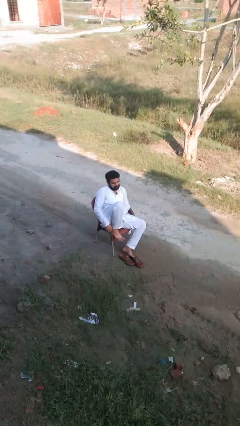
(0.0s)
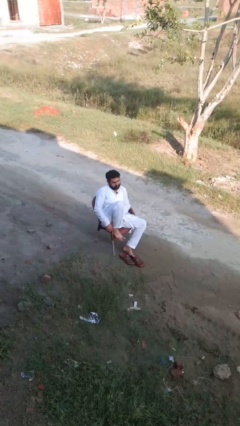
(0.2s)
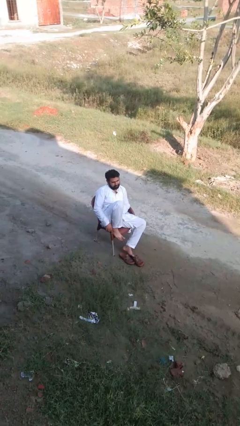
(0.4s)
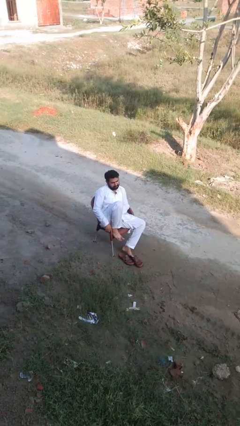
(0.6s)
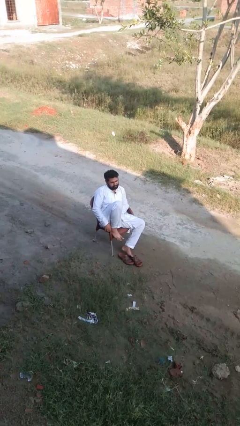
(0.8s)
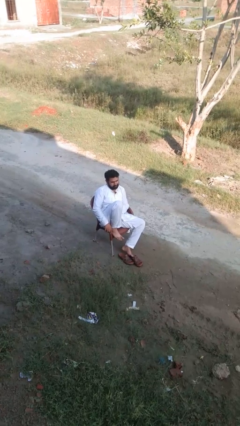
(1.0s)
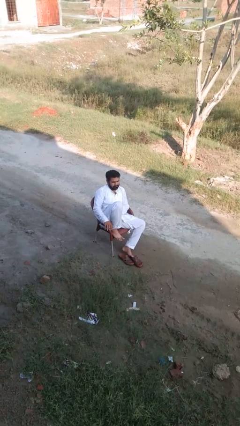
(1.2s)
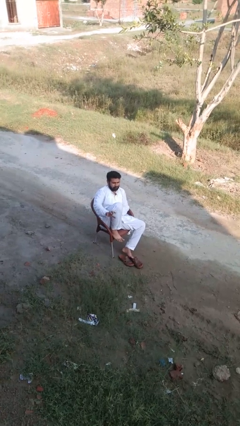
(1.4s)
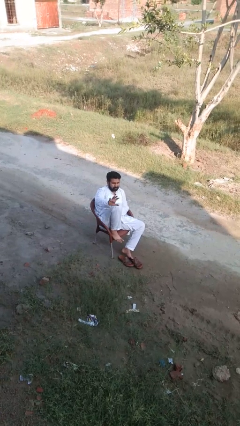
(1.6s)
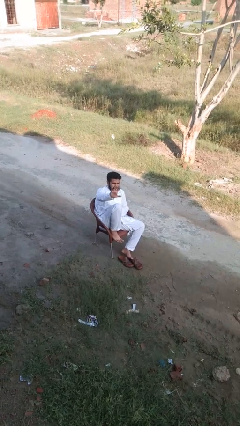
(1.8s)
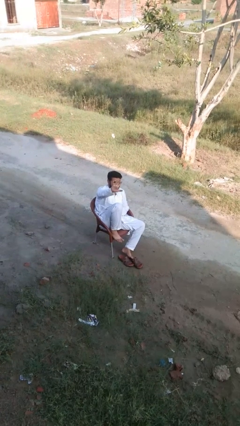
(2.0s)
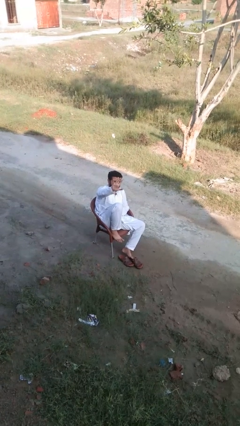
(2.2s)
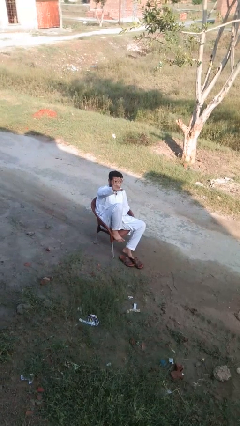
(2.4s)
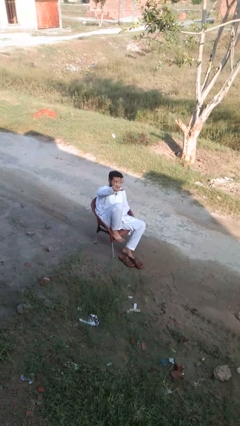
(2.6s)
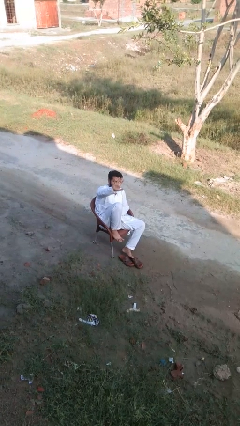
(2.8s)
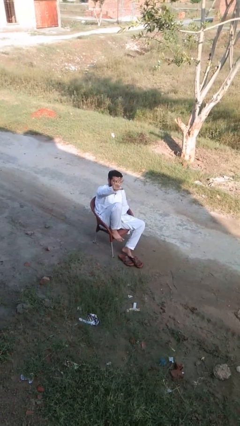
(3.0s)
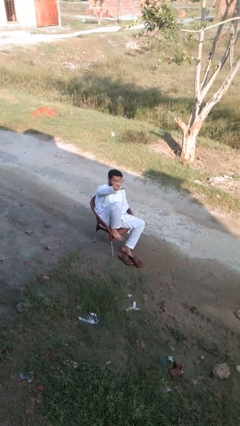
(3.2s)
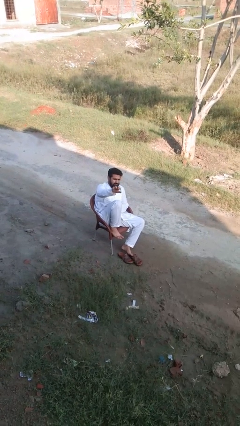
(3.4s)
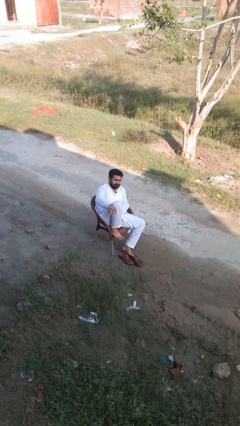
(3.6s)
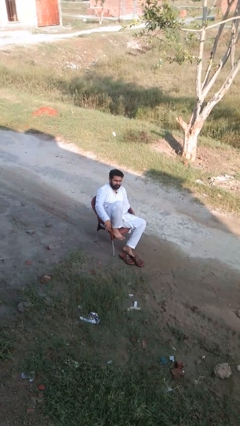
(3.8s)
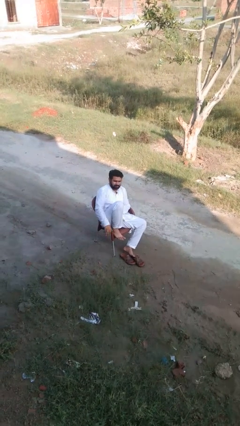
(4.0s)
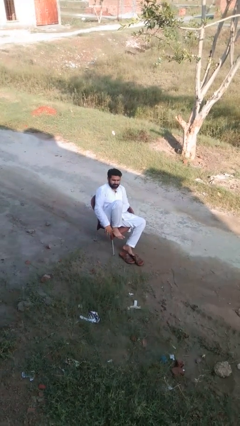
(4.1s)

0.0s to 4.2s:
person gestures number five

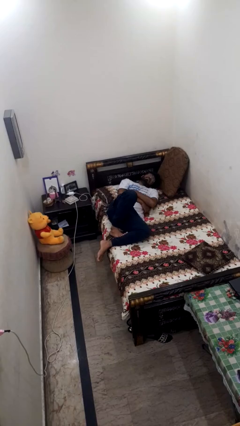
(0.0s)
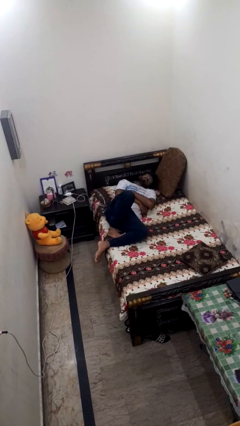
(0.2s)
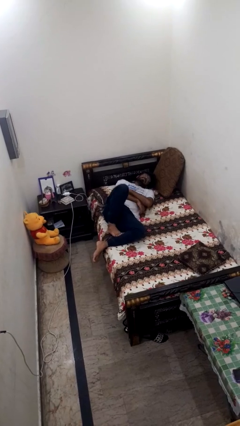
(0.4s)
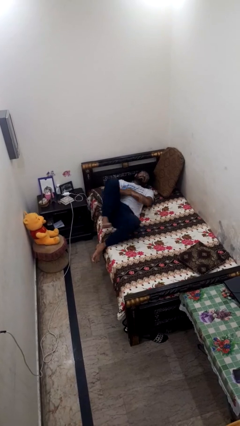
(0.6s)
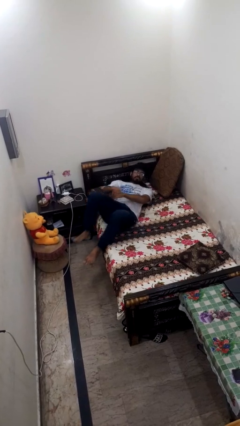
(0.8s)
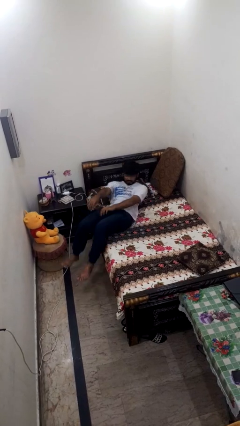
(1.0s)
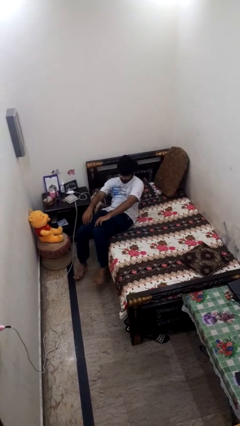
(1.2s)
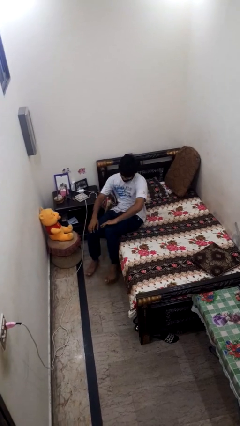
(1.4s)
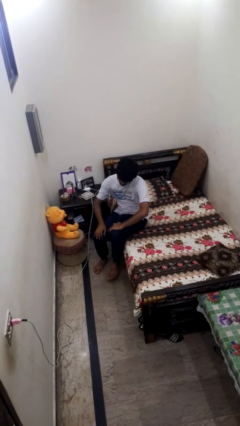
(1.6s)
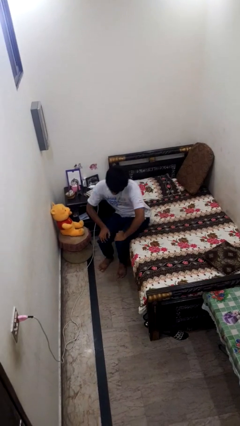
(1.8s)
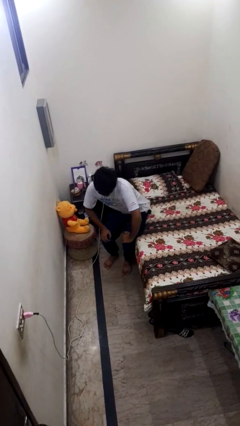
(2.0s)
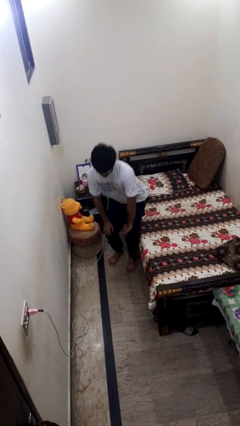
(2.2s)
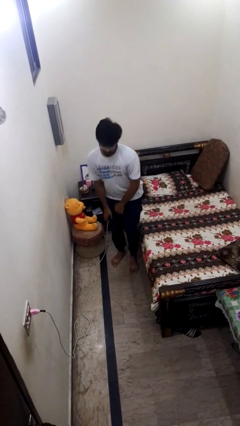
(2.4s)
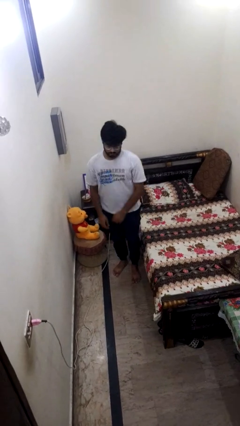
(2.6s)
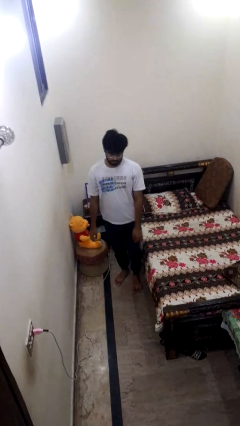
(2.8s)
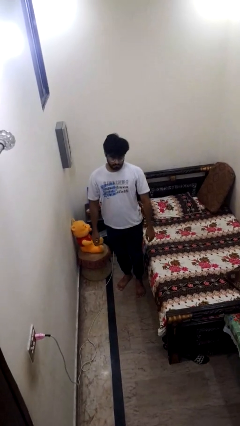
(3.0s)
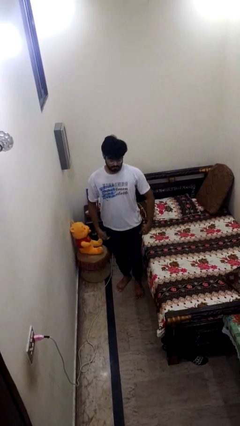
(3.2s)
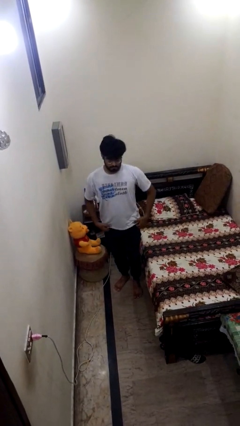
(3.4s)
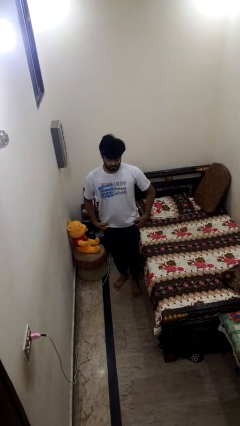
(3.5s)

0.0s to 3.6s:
person stands up

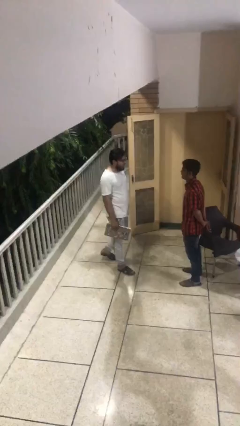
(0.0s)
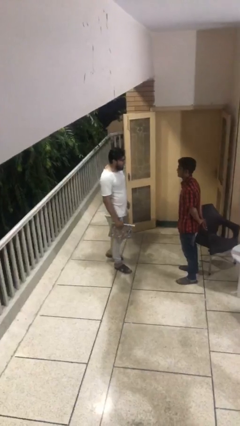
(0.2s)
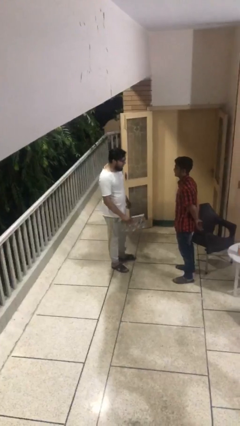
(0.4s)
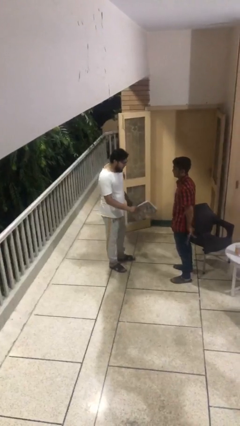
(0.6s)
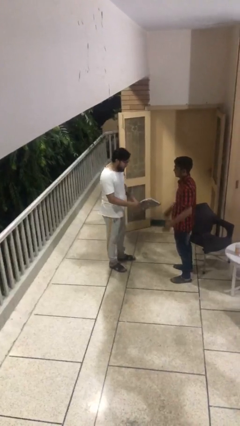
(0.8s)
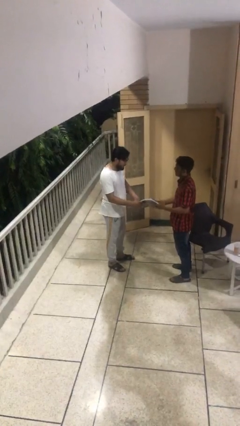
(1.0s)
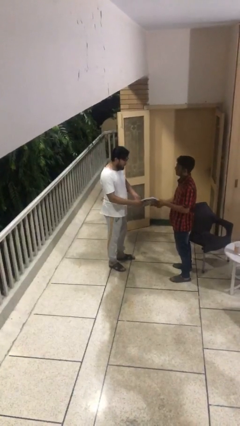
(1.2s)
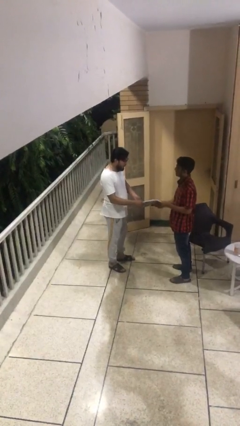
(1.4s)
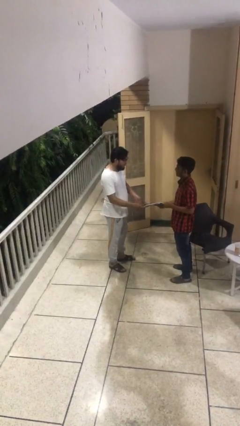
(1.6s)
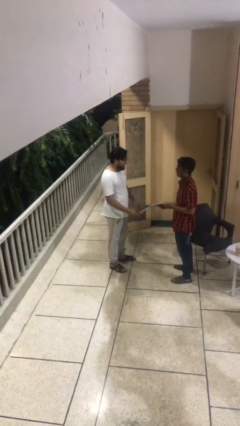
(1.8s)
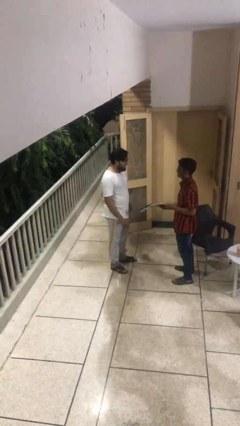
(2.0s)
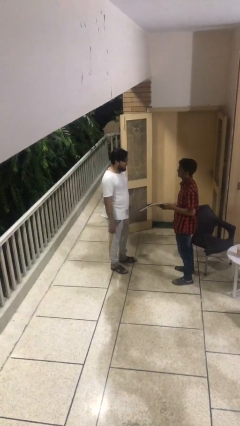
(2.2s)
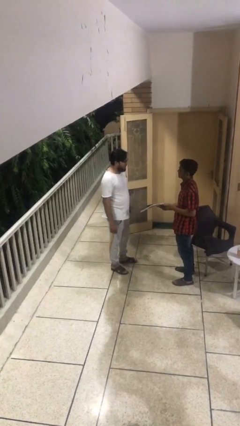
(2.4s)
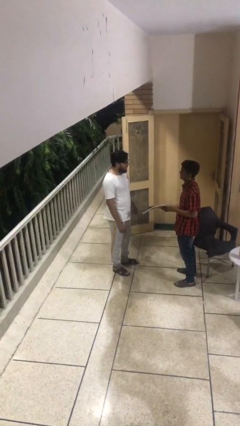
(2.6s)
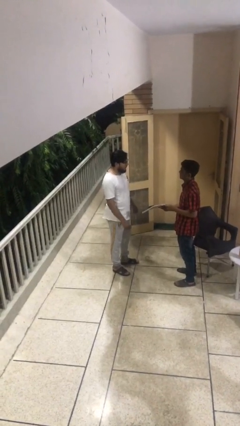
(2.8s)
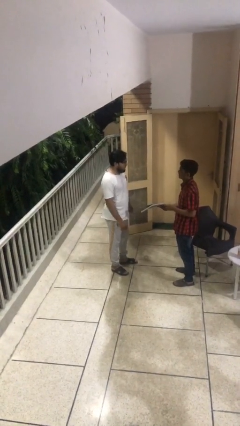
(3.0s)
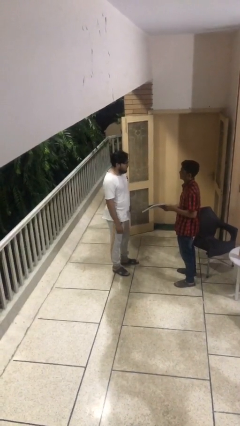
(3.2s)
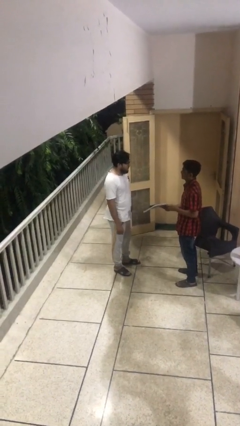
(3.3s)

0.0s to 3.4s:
person transfers object to person

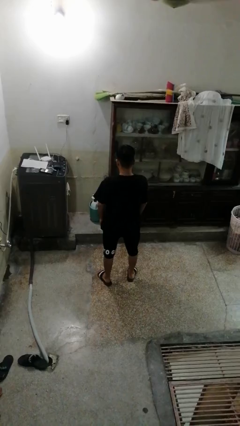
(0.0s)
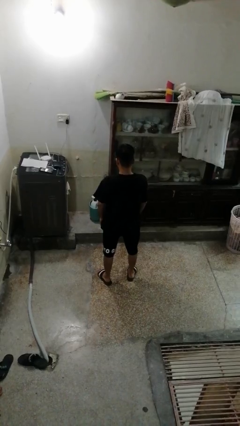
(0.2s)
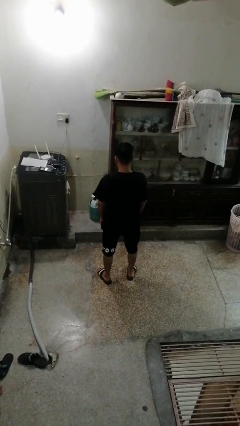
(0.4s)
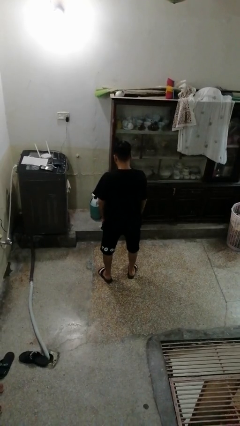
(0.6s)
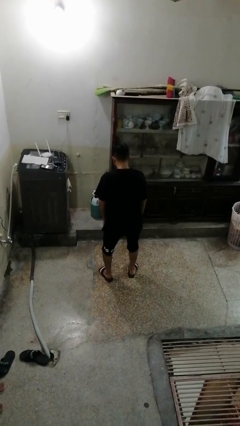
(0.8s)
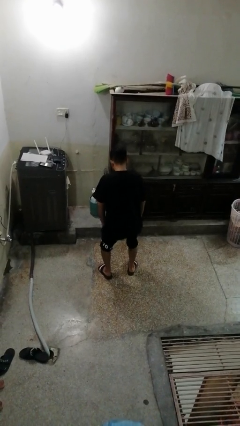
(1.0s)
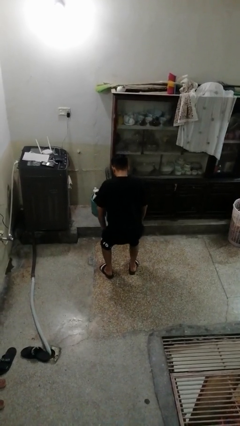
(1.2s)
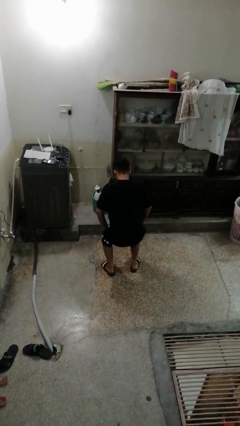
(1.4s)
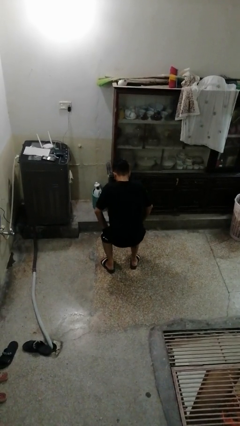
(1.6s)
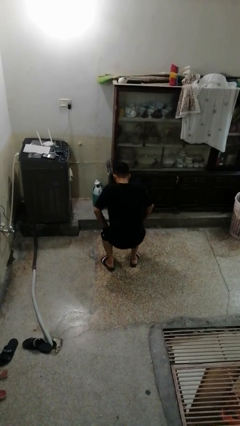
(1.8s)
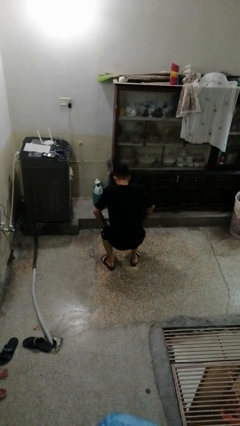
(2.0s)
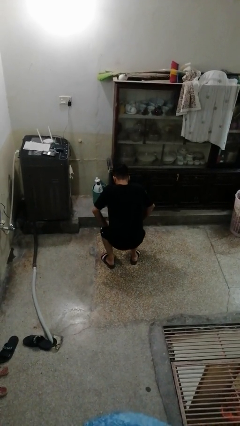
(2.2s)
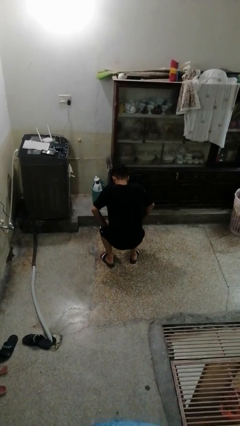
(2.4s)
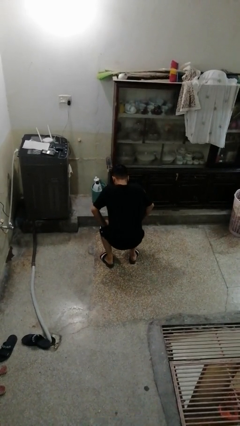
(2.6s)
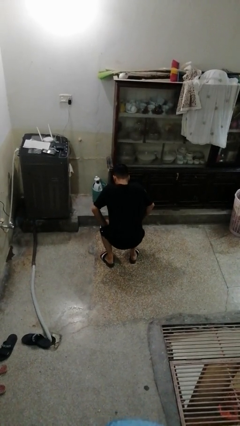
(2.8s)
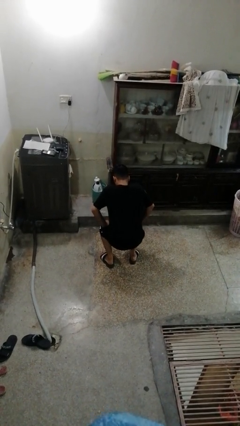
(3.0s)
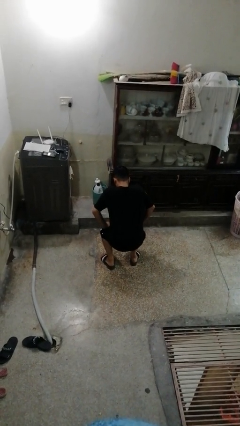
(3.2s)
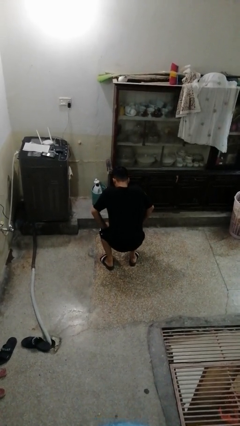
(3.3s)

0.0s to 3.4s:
person squats

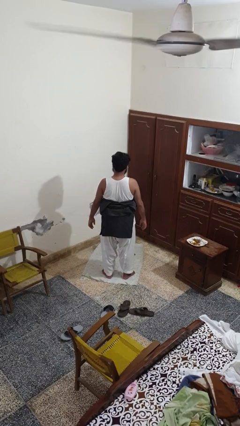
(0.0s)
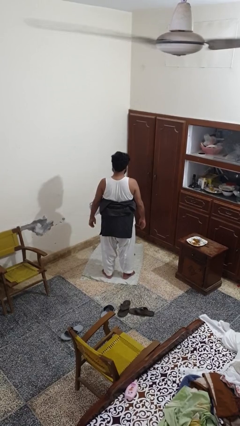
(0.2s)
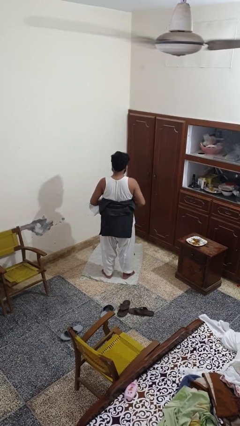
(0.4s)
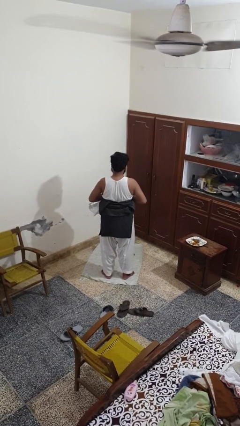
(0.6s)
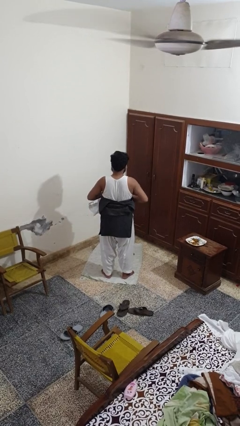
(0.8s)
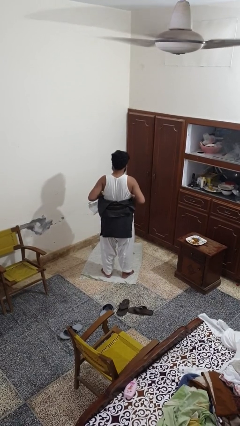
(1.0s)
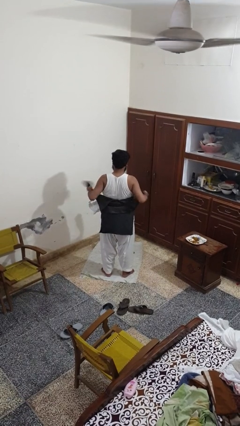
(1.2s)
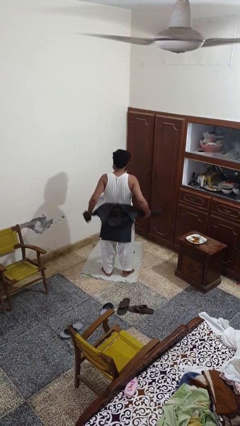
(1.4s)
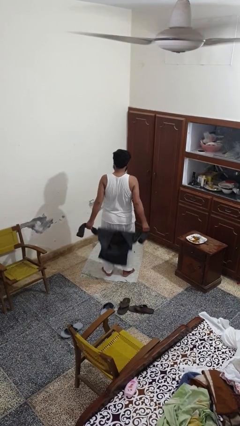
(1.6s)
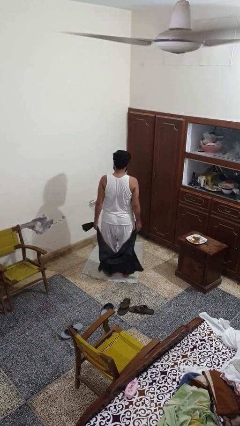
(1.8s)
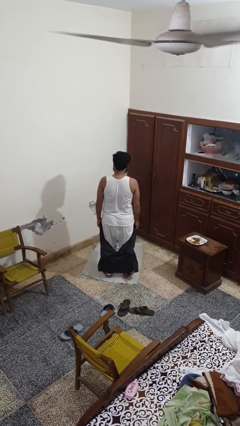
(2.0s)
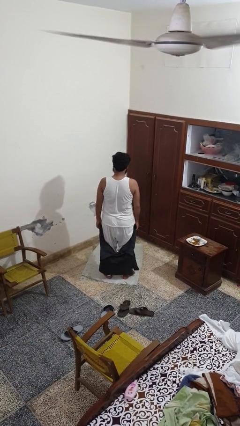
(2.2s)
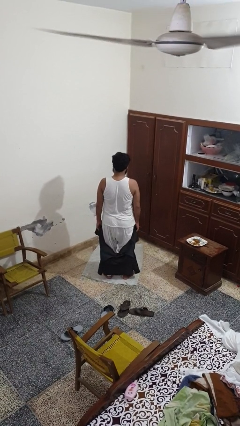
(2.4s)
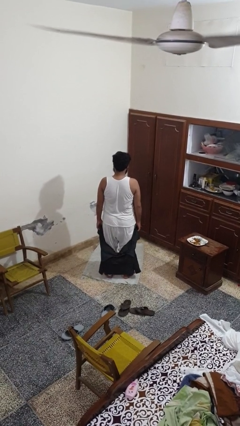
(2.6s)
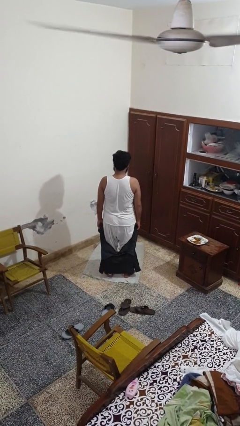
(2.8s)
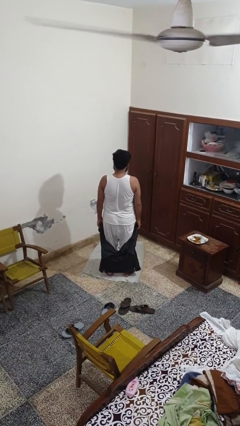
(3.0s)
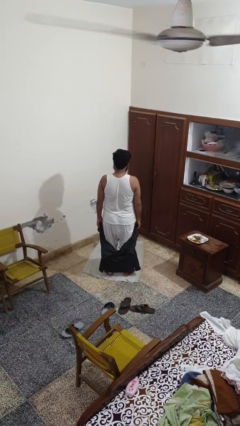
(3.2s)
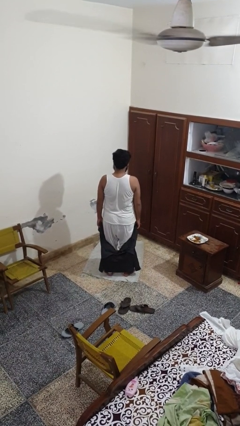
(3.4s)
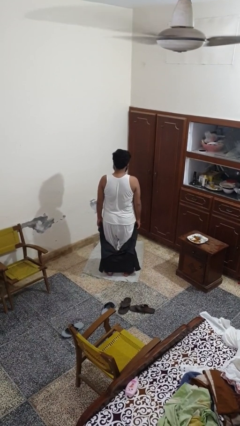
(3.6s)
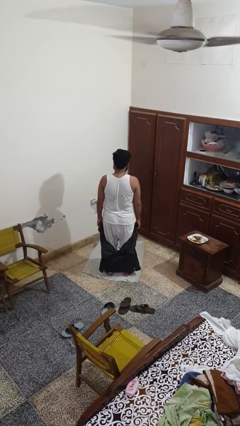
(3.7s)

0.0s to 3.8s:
person unties jacket around waist
